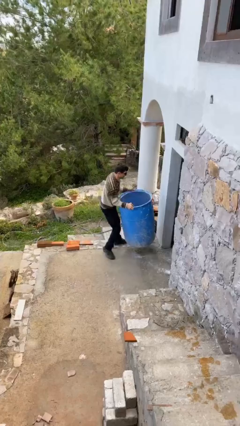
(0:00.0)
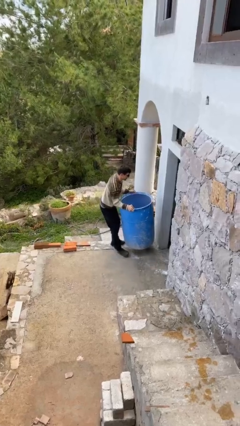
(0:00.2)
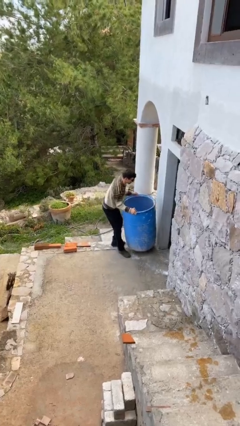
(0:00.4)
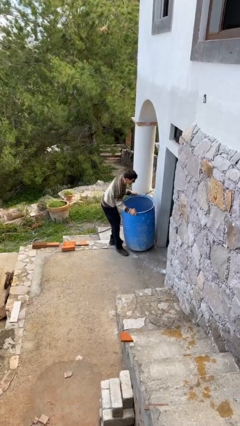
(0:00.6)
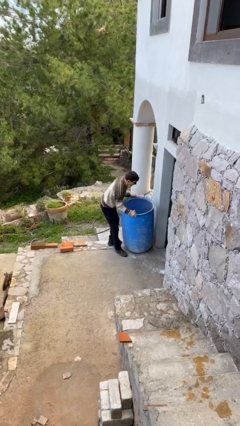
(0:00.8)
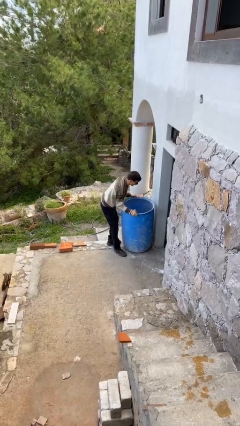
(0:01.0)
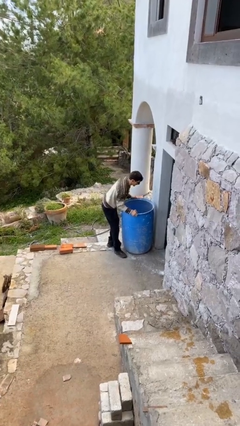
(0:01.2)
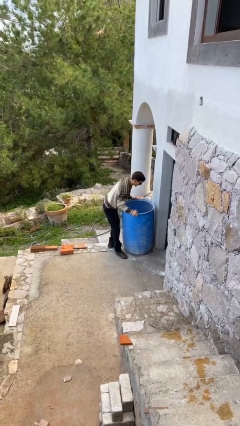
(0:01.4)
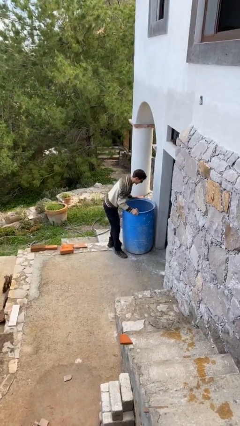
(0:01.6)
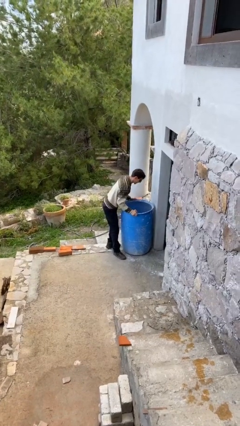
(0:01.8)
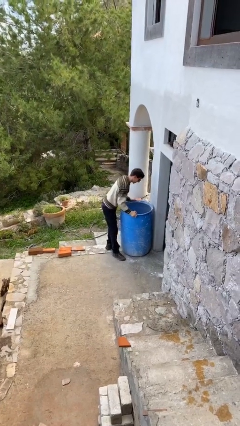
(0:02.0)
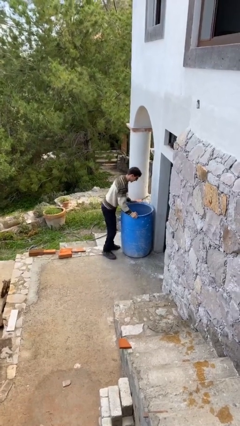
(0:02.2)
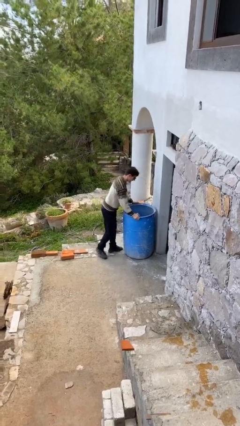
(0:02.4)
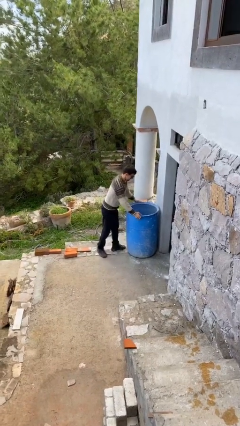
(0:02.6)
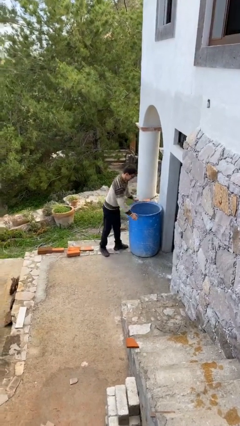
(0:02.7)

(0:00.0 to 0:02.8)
person puts down object on floor

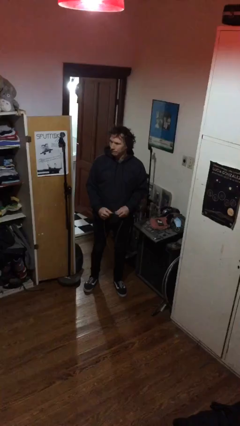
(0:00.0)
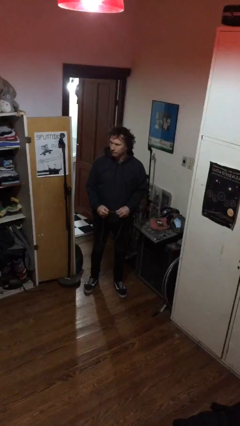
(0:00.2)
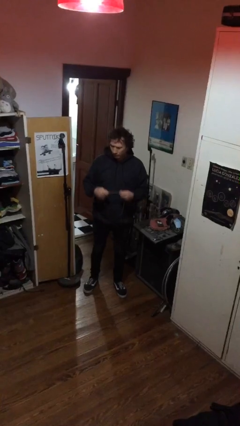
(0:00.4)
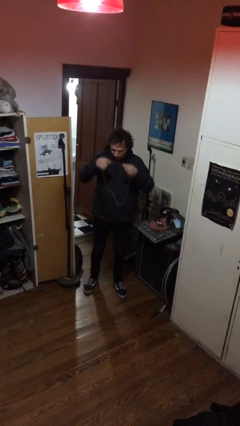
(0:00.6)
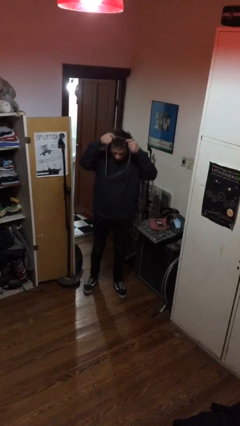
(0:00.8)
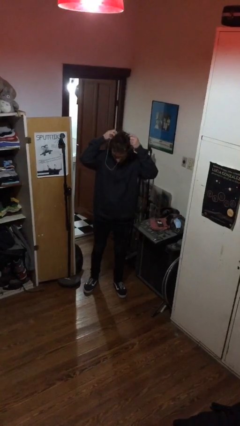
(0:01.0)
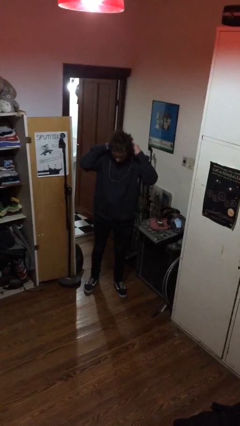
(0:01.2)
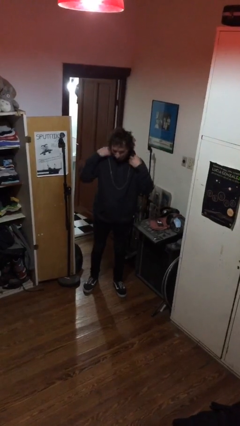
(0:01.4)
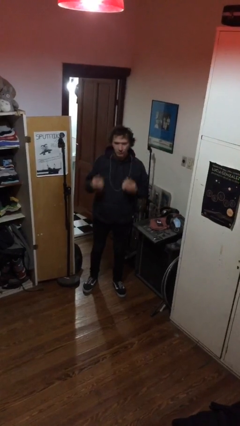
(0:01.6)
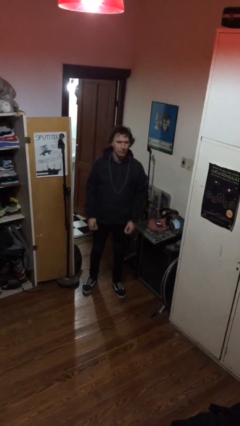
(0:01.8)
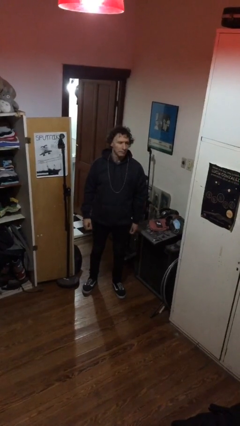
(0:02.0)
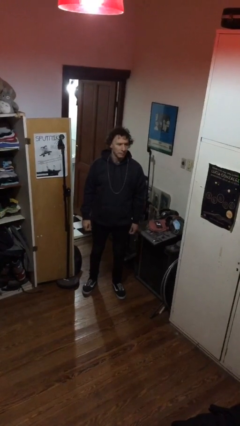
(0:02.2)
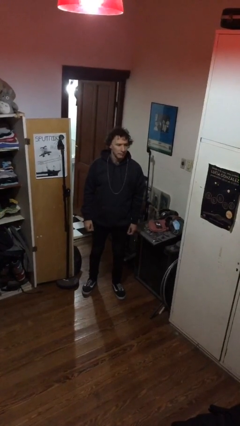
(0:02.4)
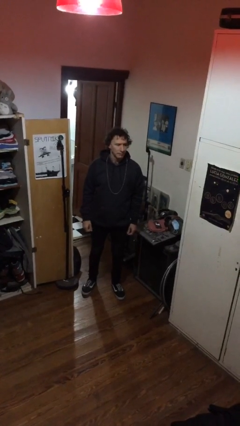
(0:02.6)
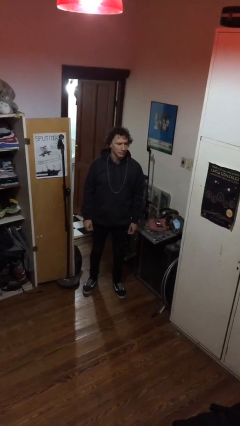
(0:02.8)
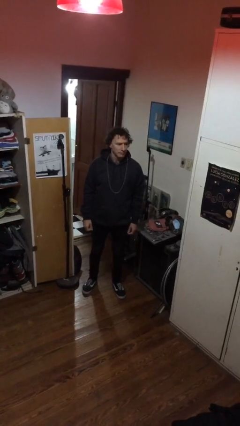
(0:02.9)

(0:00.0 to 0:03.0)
person puts on necklace

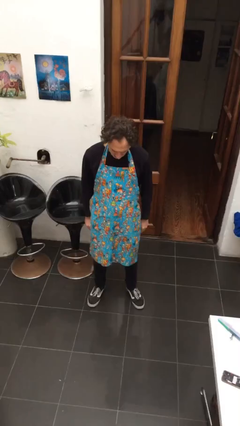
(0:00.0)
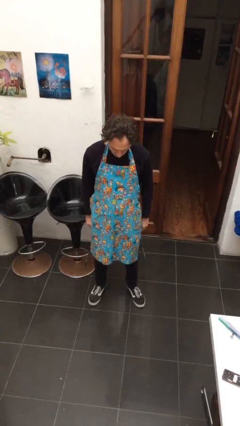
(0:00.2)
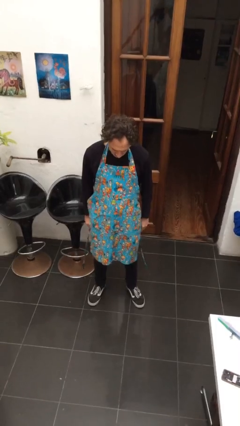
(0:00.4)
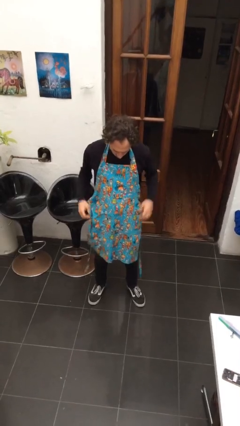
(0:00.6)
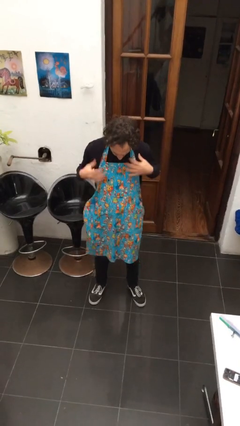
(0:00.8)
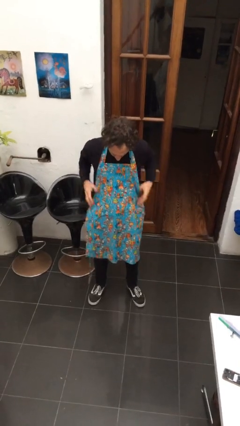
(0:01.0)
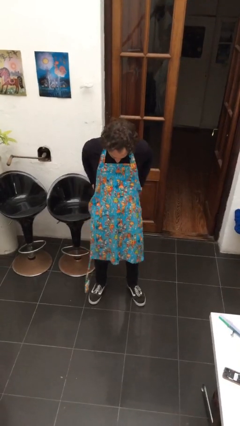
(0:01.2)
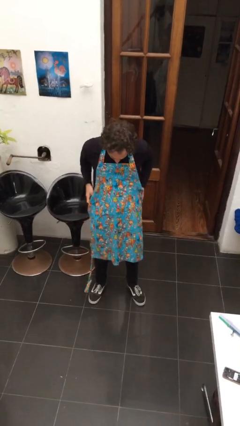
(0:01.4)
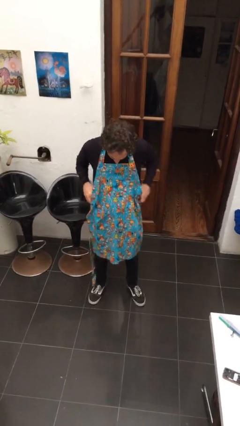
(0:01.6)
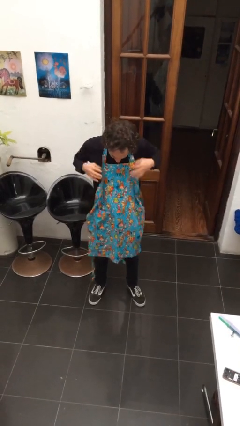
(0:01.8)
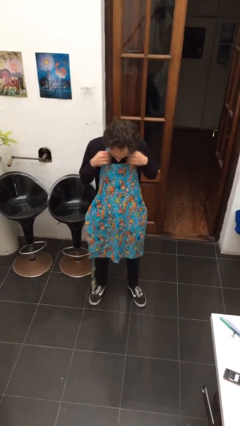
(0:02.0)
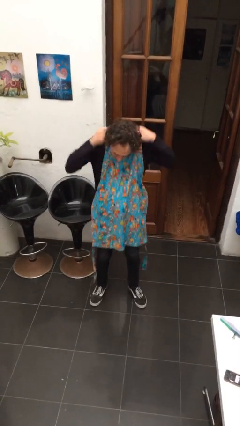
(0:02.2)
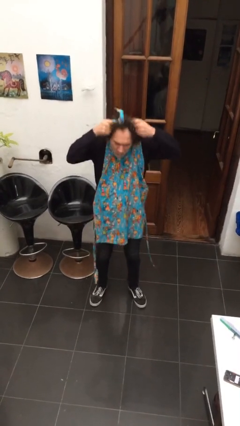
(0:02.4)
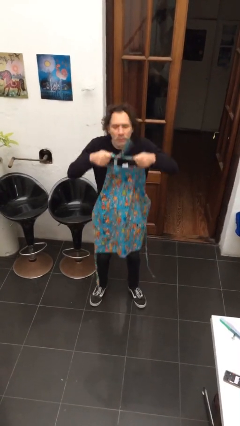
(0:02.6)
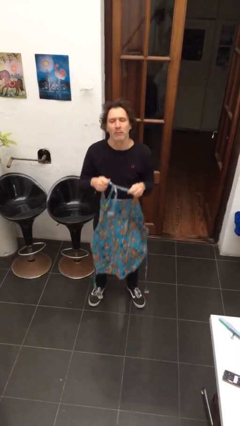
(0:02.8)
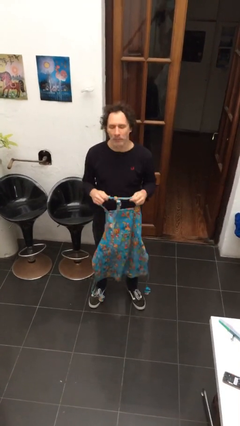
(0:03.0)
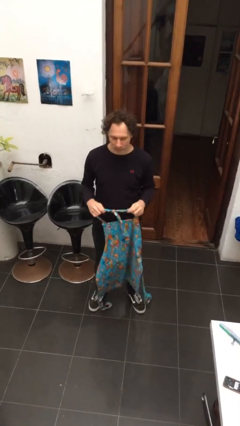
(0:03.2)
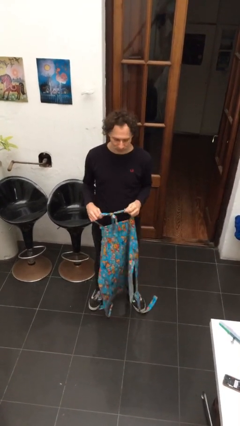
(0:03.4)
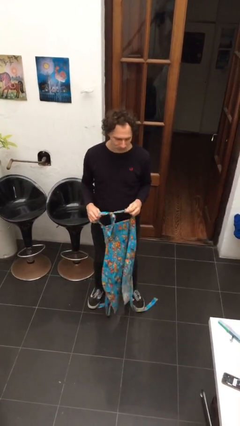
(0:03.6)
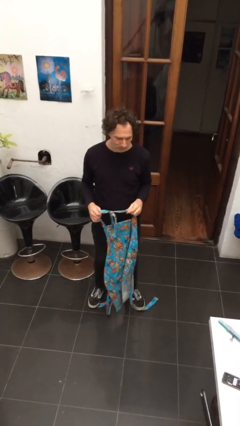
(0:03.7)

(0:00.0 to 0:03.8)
person takes off apron

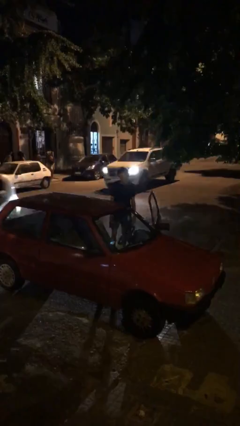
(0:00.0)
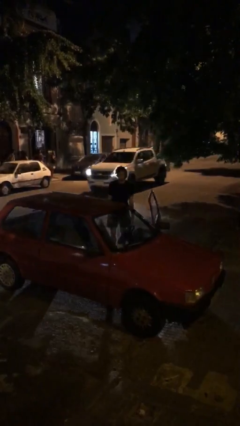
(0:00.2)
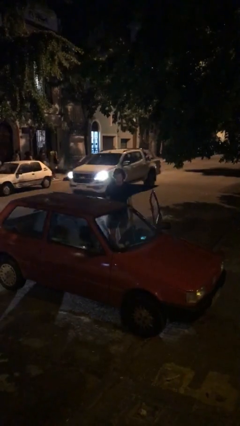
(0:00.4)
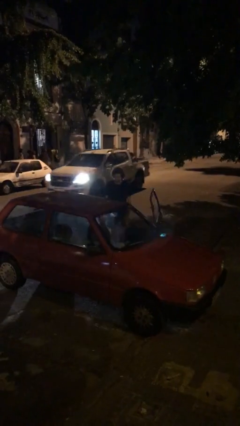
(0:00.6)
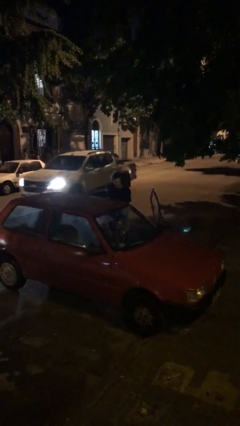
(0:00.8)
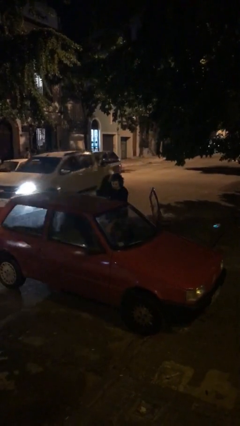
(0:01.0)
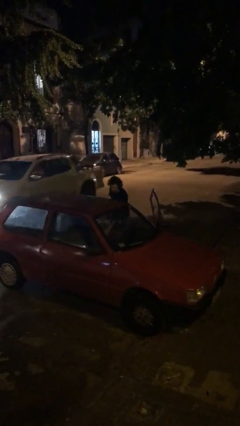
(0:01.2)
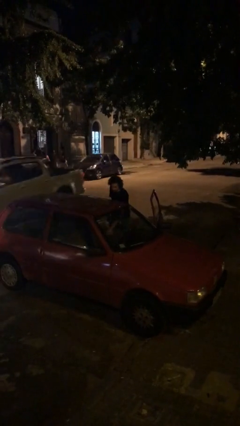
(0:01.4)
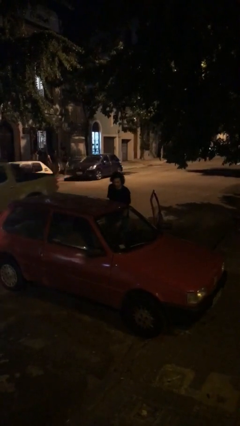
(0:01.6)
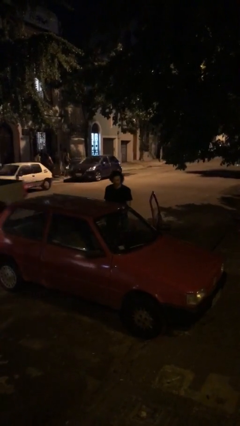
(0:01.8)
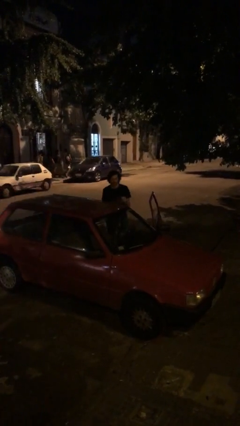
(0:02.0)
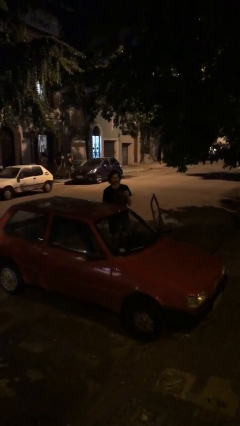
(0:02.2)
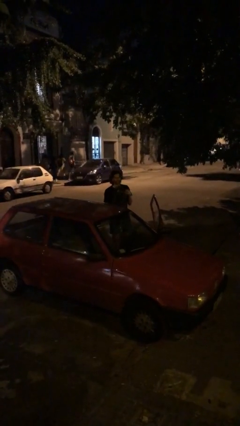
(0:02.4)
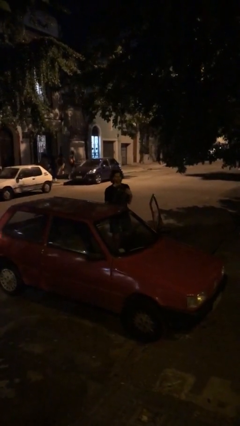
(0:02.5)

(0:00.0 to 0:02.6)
person unloads car

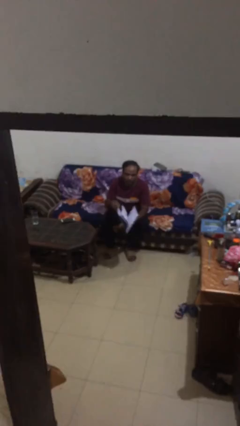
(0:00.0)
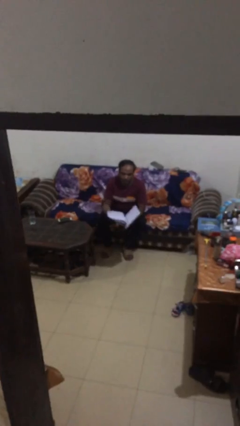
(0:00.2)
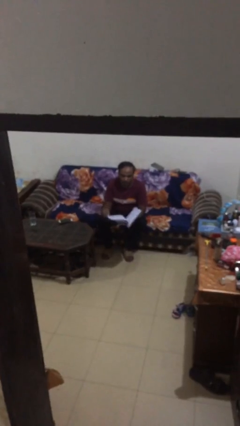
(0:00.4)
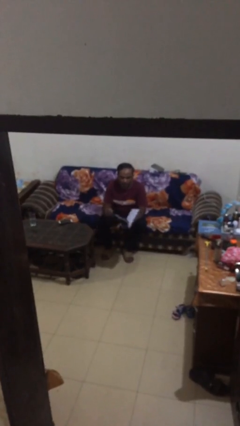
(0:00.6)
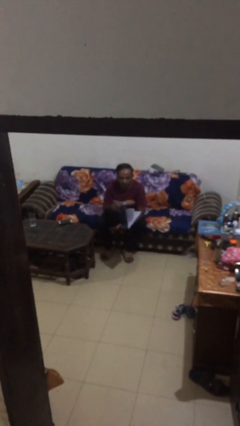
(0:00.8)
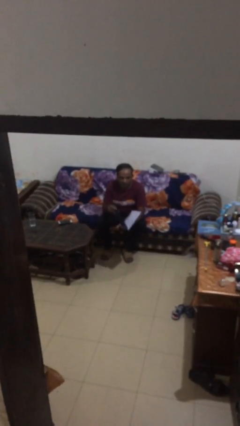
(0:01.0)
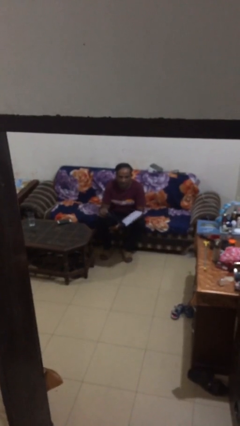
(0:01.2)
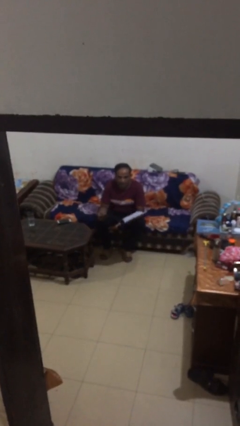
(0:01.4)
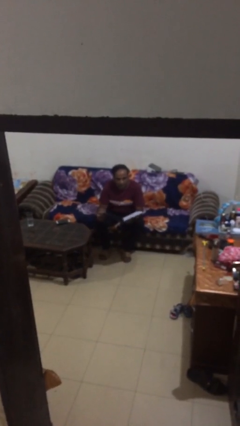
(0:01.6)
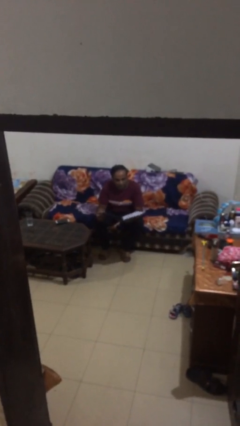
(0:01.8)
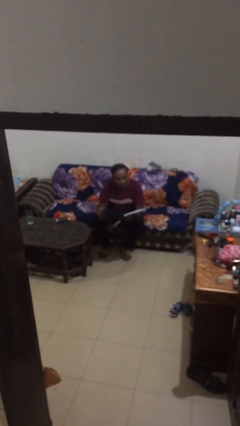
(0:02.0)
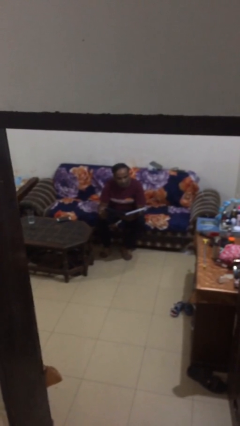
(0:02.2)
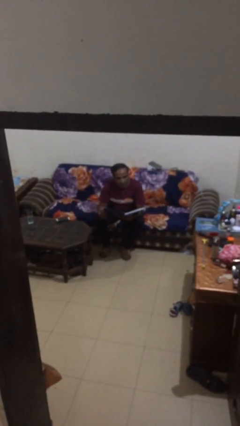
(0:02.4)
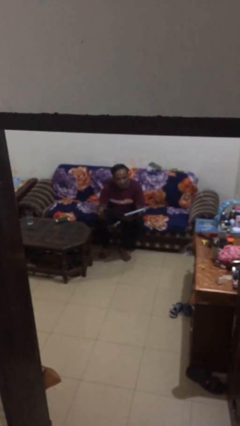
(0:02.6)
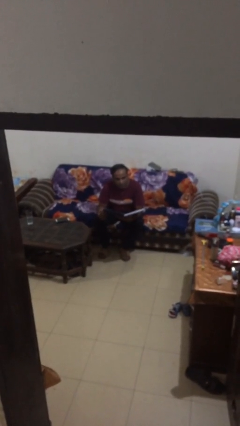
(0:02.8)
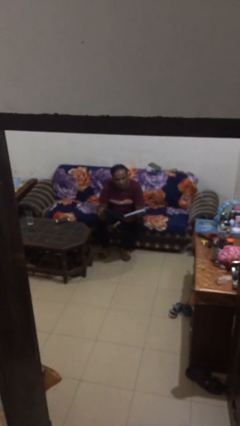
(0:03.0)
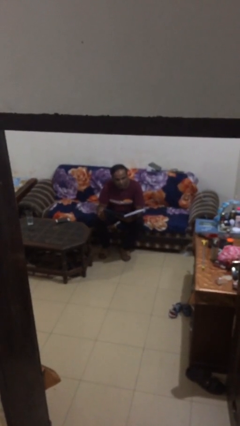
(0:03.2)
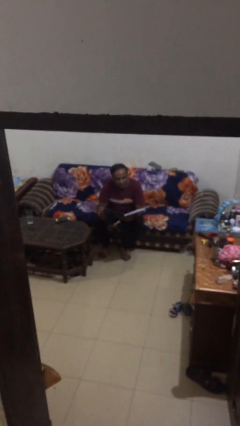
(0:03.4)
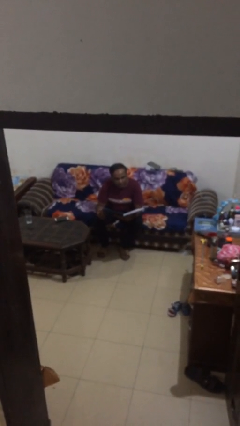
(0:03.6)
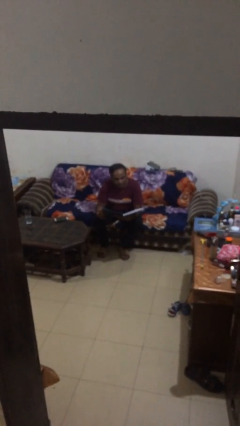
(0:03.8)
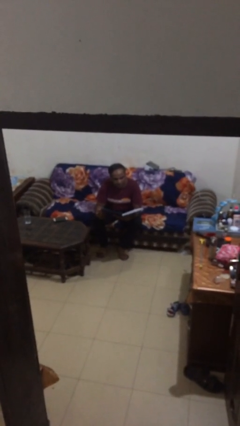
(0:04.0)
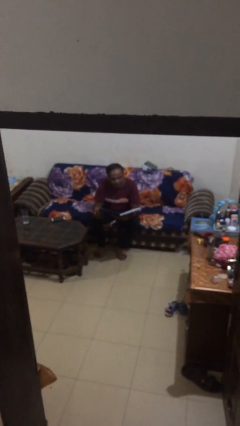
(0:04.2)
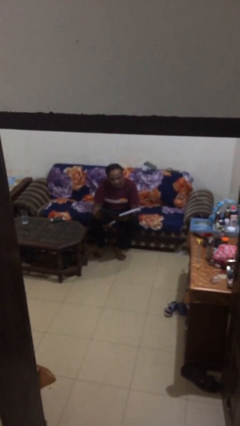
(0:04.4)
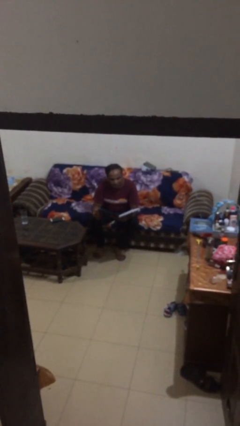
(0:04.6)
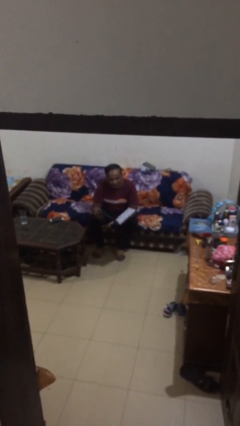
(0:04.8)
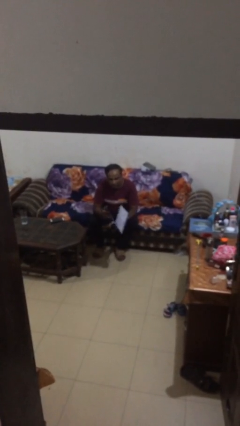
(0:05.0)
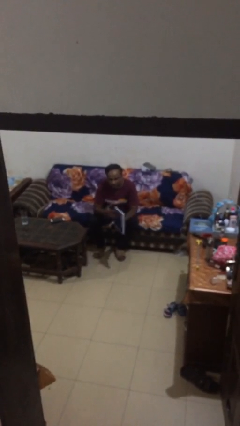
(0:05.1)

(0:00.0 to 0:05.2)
person reads document

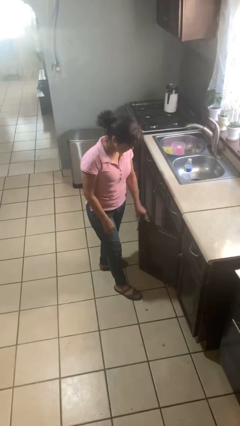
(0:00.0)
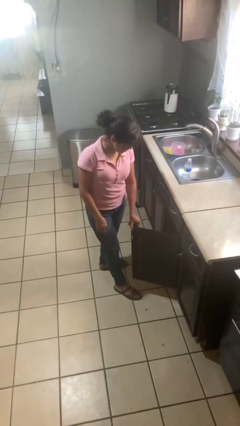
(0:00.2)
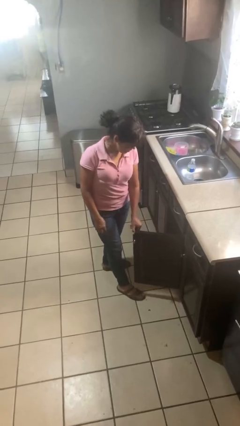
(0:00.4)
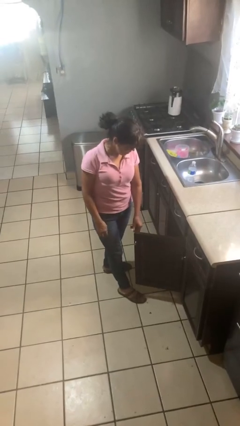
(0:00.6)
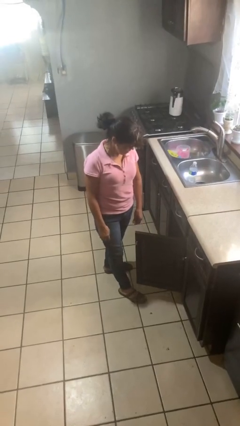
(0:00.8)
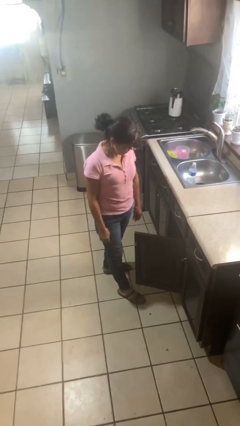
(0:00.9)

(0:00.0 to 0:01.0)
person opens cabinet
